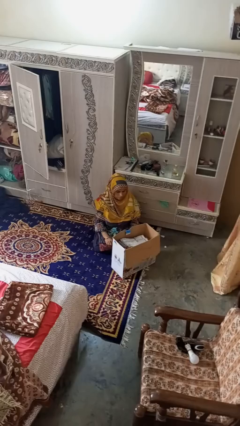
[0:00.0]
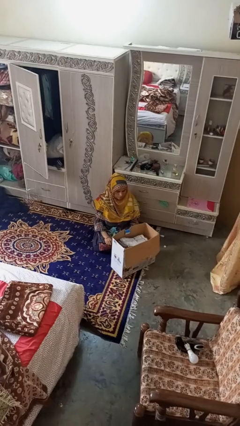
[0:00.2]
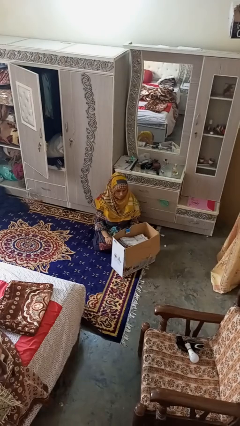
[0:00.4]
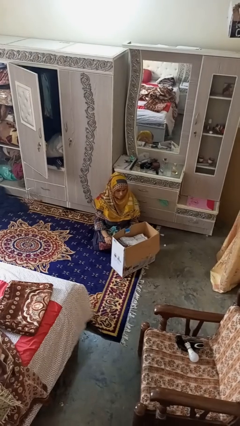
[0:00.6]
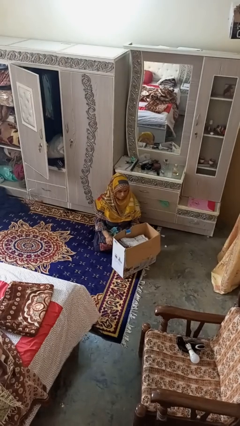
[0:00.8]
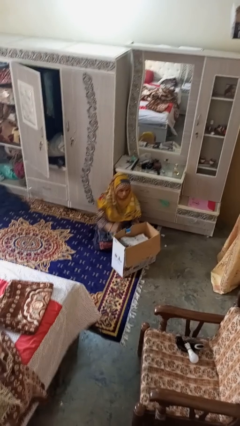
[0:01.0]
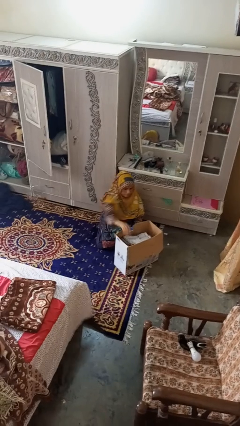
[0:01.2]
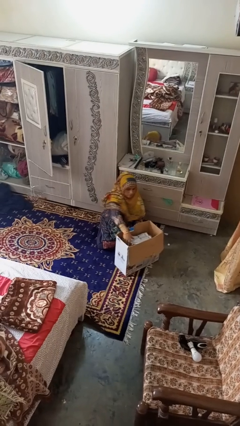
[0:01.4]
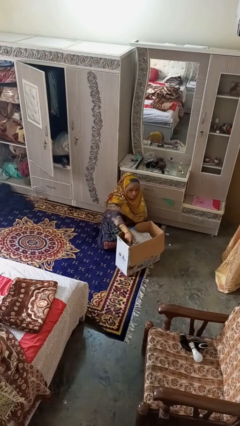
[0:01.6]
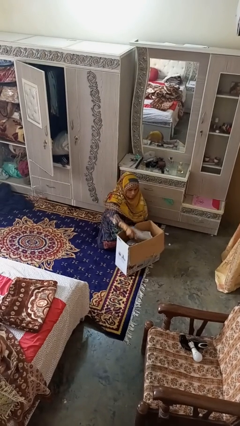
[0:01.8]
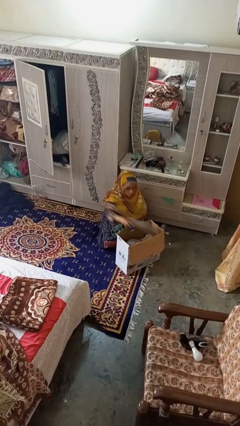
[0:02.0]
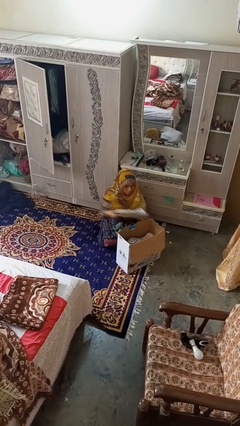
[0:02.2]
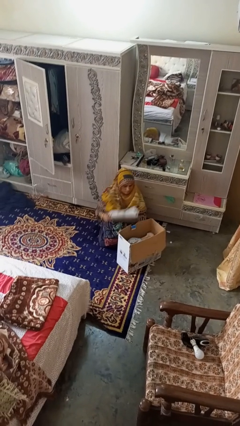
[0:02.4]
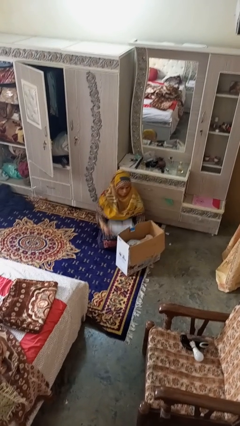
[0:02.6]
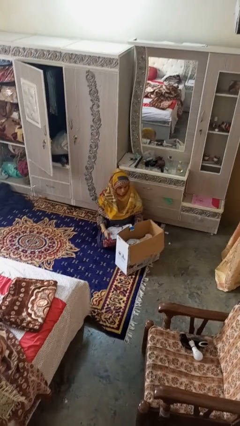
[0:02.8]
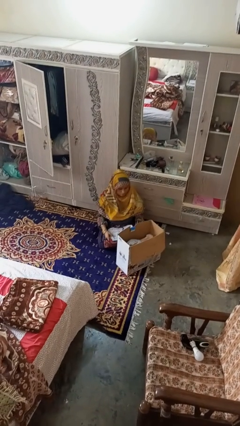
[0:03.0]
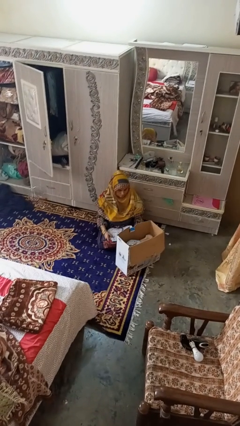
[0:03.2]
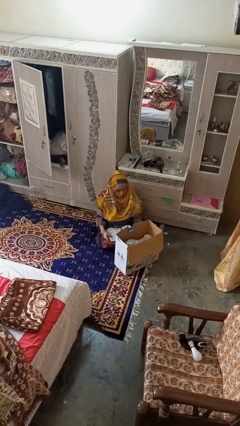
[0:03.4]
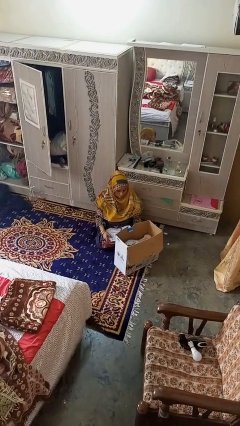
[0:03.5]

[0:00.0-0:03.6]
person takes object from box

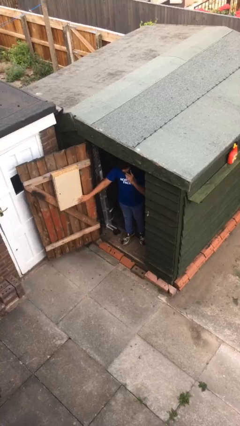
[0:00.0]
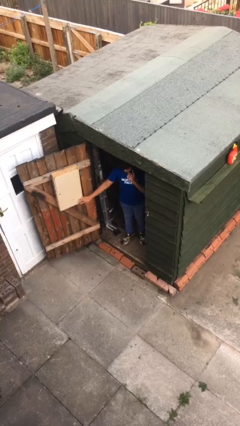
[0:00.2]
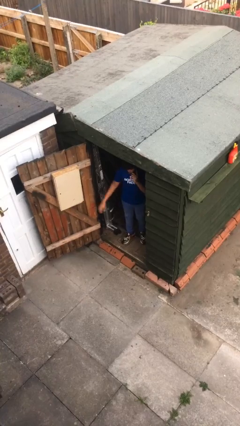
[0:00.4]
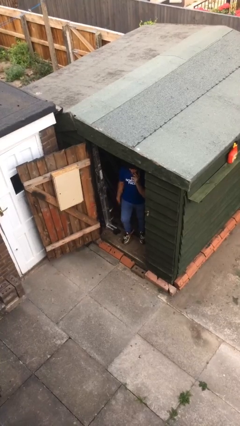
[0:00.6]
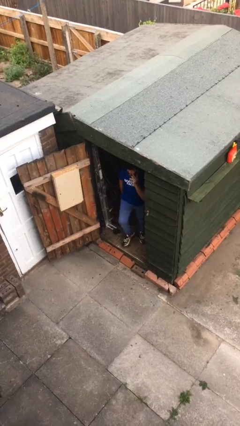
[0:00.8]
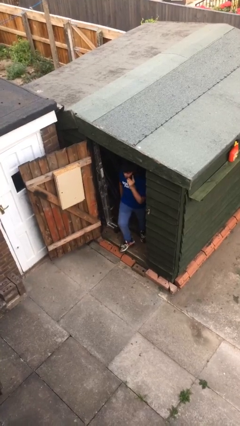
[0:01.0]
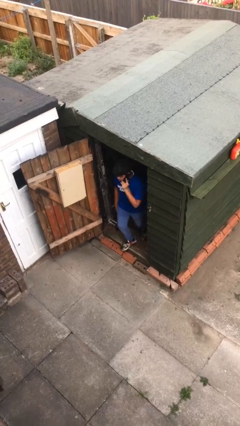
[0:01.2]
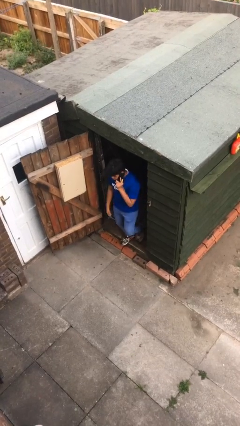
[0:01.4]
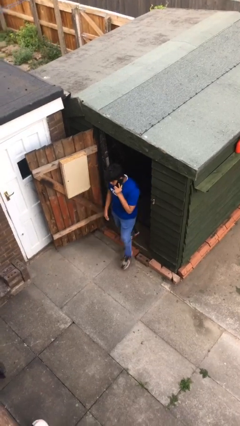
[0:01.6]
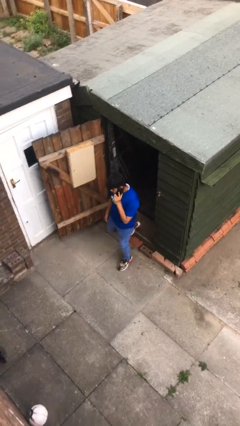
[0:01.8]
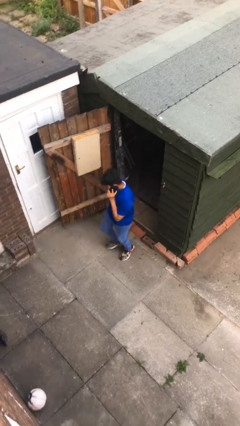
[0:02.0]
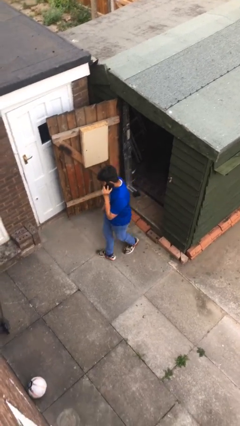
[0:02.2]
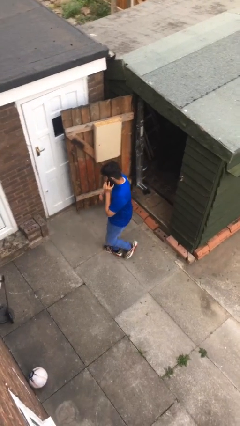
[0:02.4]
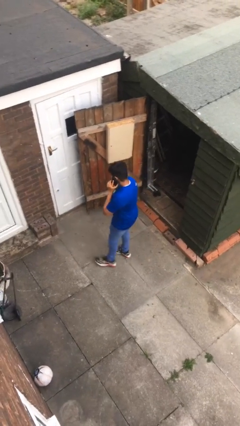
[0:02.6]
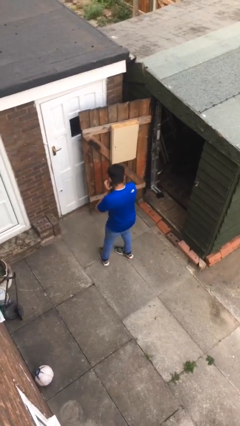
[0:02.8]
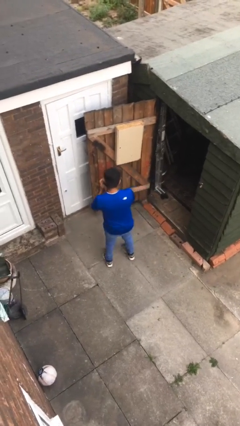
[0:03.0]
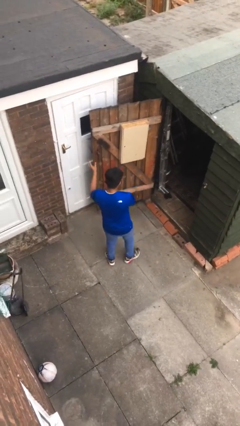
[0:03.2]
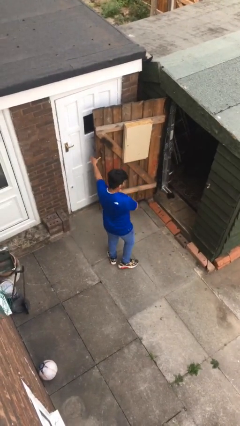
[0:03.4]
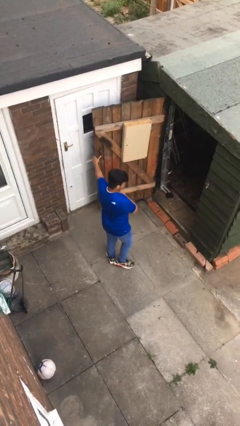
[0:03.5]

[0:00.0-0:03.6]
person enters scene through structure

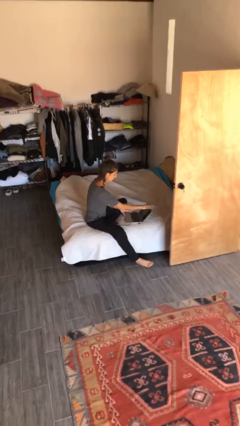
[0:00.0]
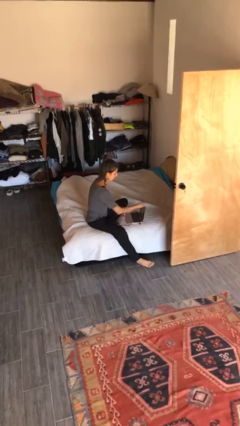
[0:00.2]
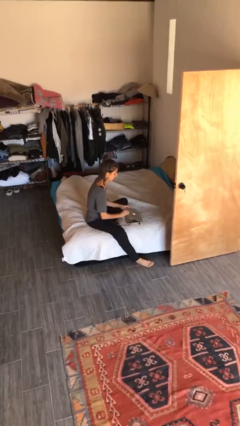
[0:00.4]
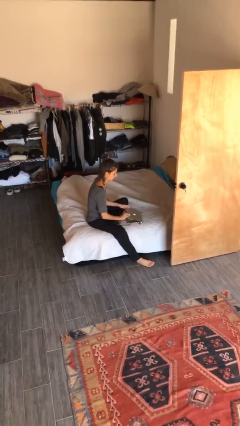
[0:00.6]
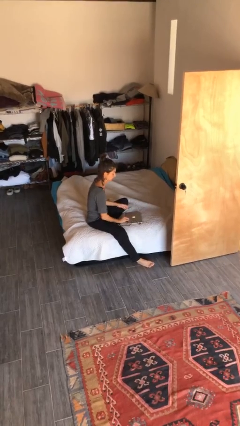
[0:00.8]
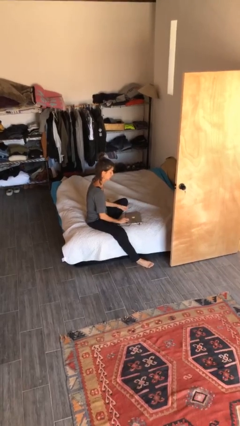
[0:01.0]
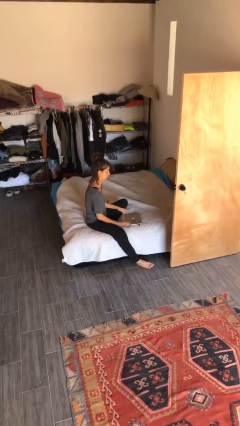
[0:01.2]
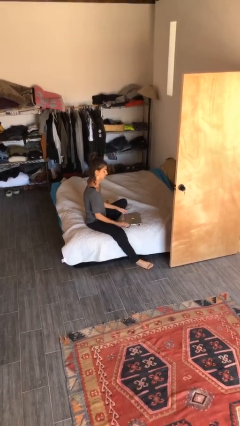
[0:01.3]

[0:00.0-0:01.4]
person interacts with laptop

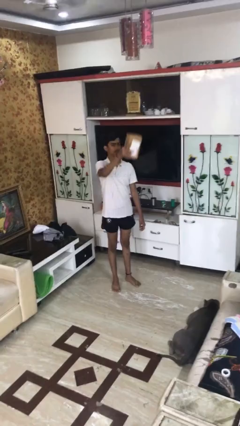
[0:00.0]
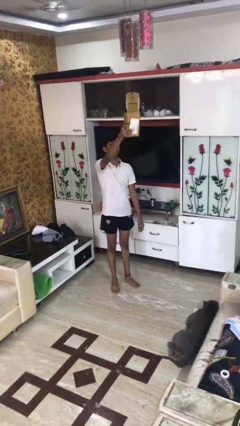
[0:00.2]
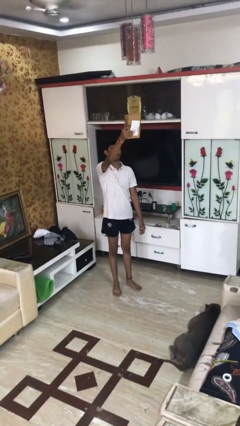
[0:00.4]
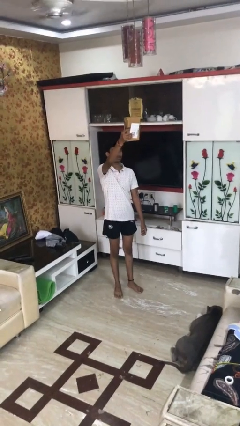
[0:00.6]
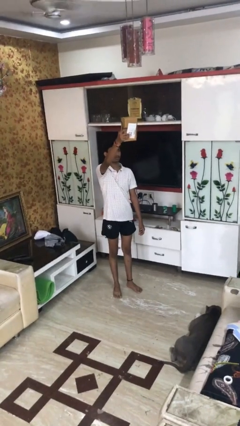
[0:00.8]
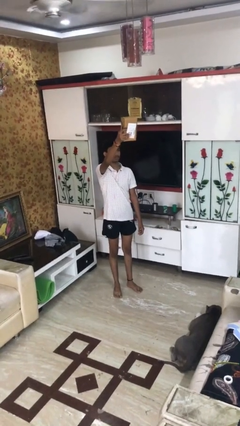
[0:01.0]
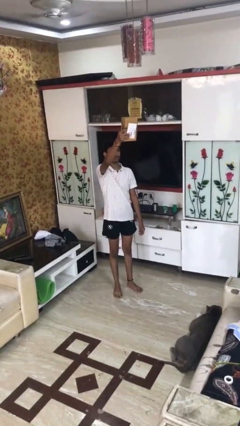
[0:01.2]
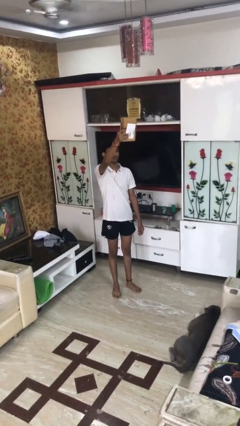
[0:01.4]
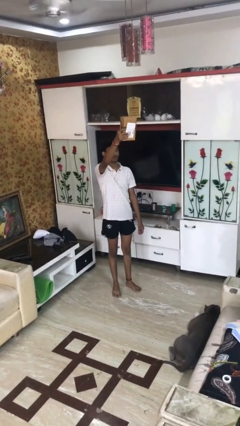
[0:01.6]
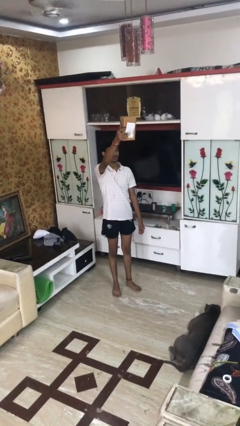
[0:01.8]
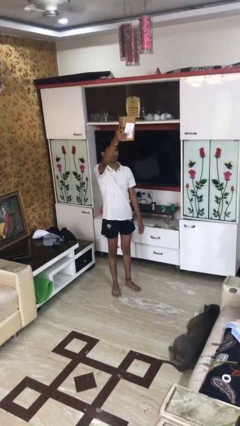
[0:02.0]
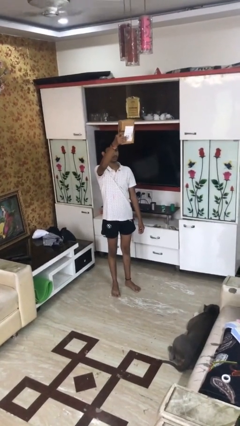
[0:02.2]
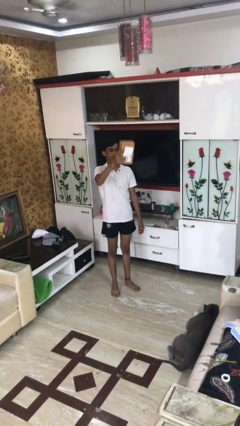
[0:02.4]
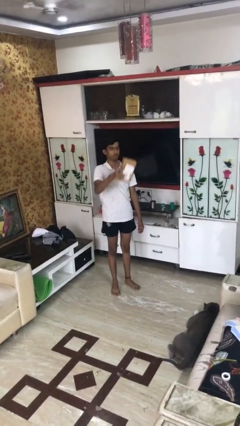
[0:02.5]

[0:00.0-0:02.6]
person holds object above head

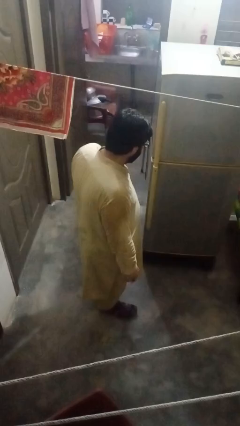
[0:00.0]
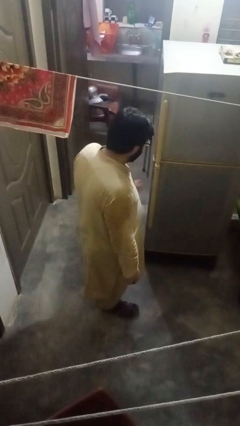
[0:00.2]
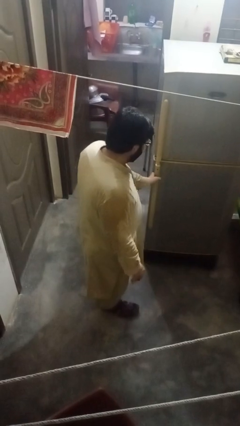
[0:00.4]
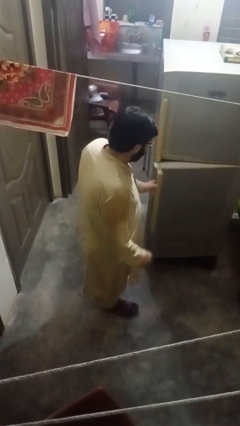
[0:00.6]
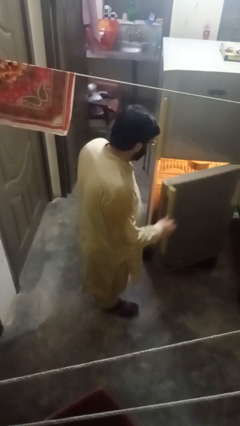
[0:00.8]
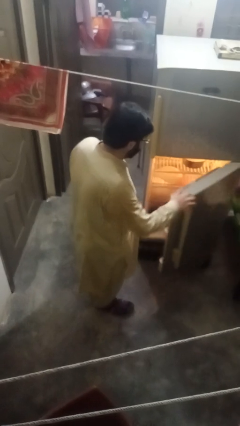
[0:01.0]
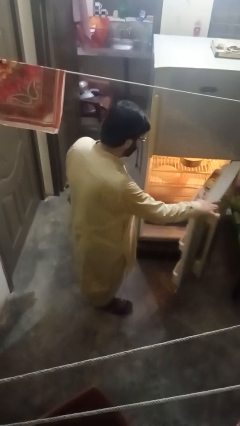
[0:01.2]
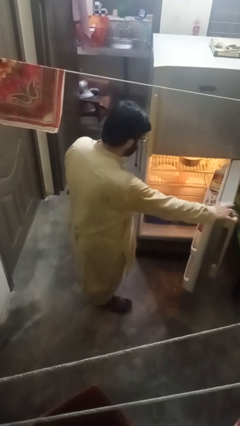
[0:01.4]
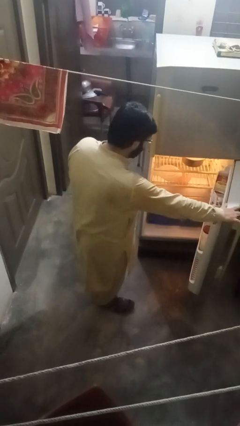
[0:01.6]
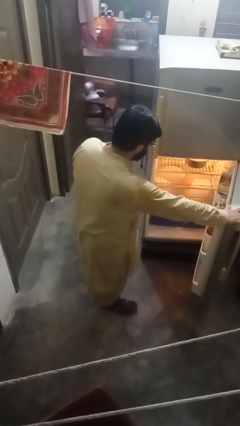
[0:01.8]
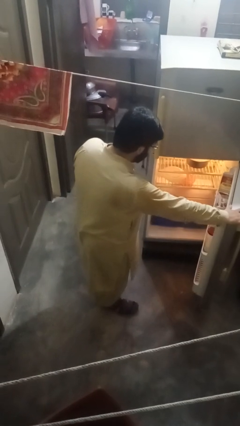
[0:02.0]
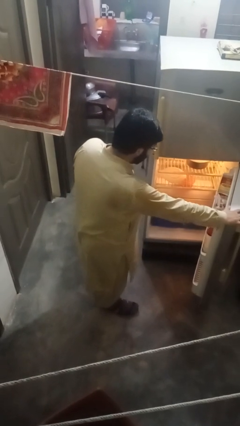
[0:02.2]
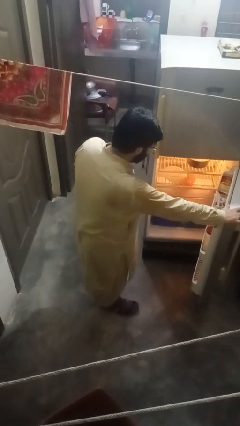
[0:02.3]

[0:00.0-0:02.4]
person opens refrigerator

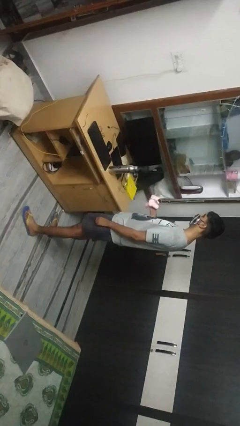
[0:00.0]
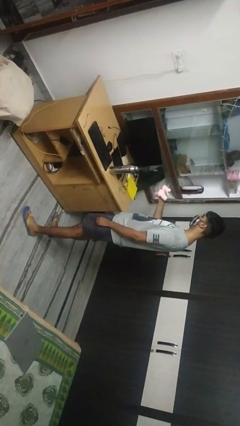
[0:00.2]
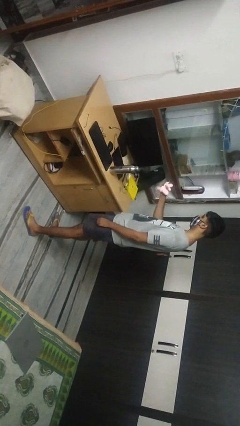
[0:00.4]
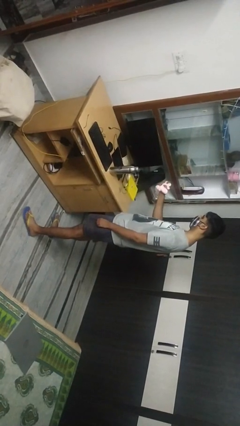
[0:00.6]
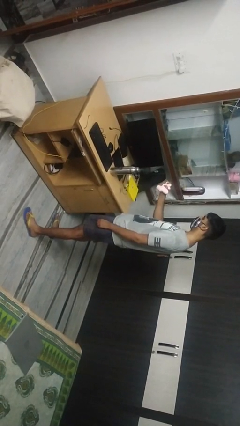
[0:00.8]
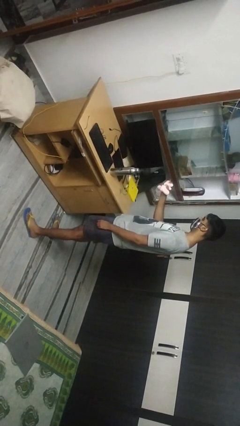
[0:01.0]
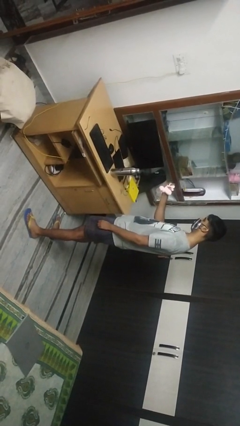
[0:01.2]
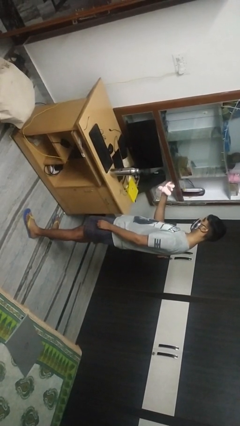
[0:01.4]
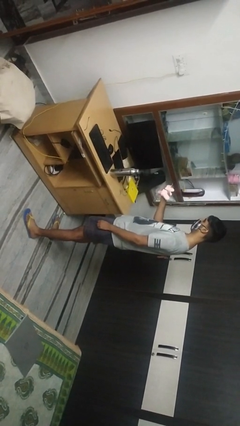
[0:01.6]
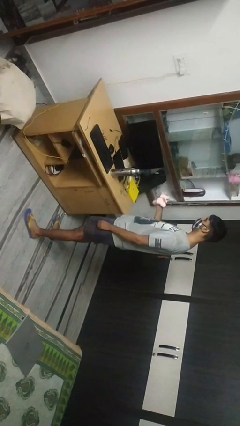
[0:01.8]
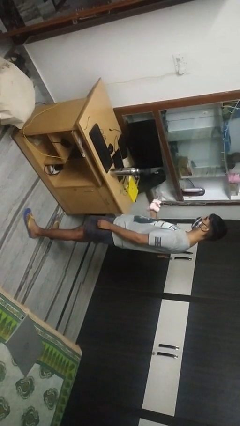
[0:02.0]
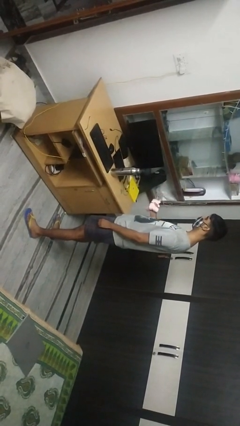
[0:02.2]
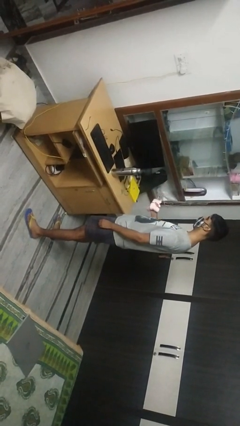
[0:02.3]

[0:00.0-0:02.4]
person squeezes object

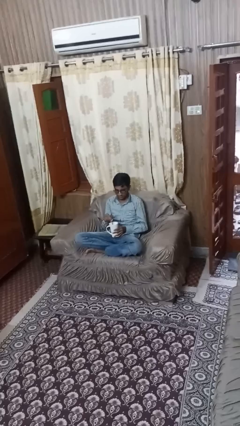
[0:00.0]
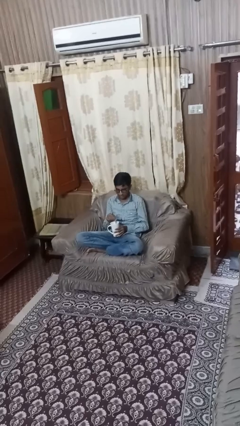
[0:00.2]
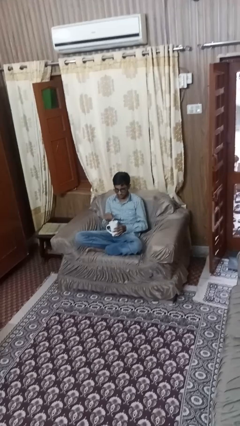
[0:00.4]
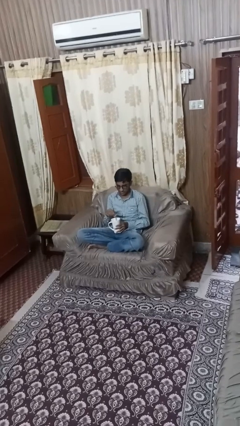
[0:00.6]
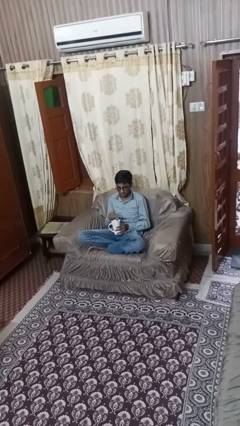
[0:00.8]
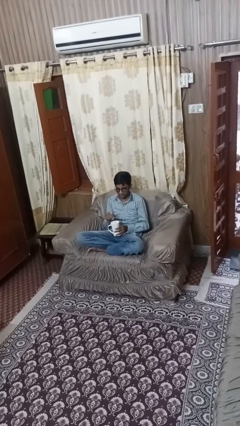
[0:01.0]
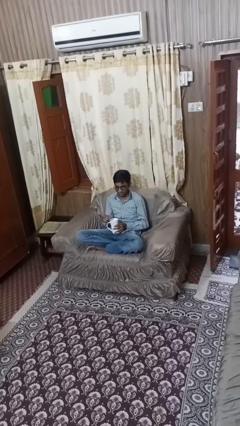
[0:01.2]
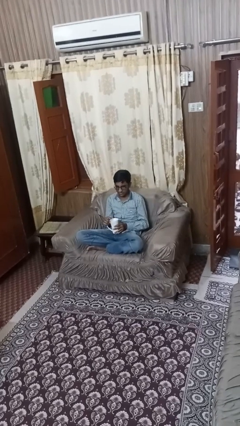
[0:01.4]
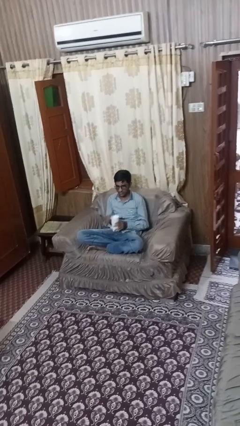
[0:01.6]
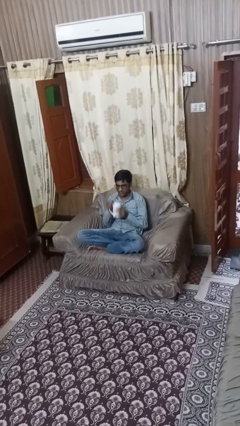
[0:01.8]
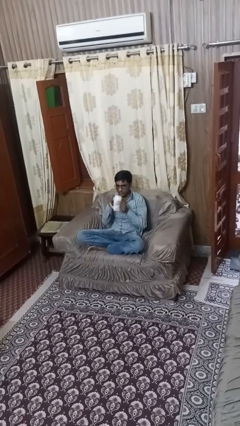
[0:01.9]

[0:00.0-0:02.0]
person stirs mug
